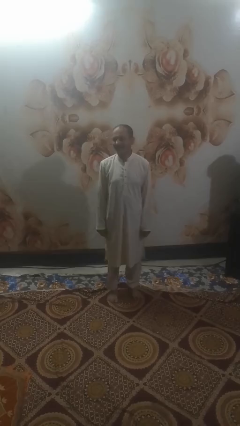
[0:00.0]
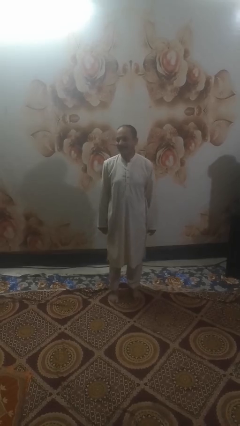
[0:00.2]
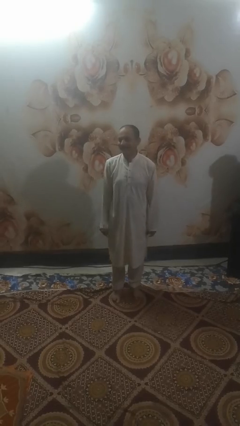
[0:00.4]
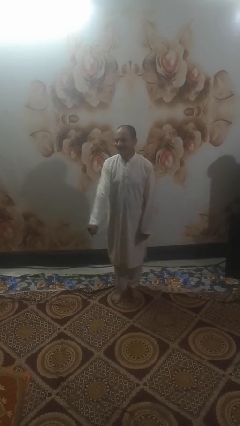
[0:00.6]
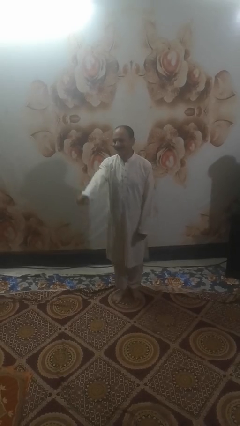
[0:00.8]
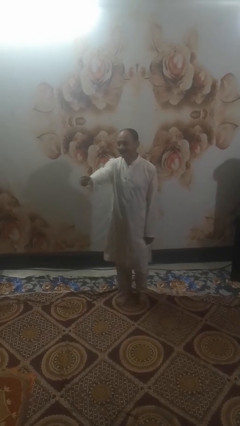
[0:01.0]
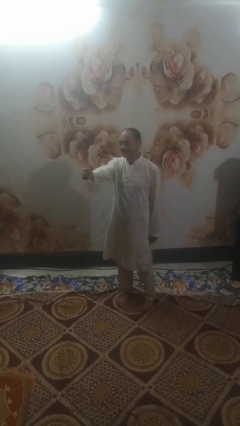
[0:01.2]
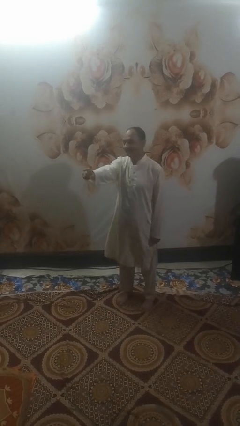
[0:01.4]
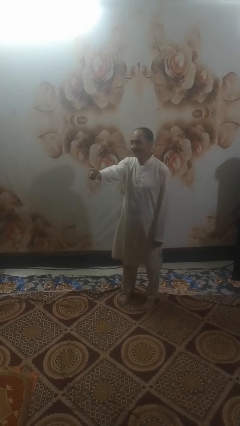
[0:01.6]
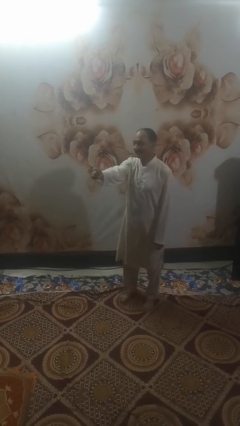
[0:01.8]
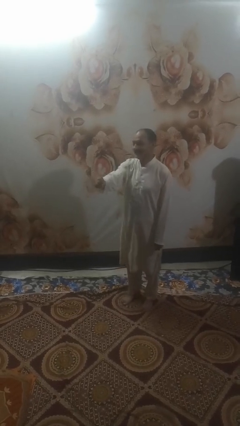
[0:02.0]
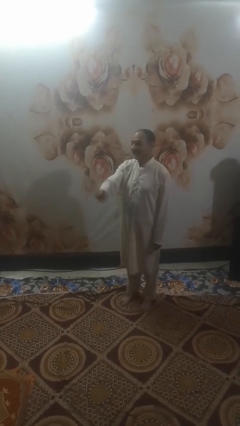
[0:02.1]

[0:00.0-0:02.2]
person points at person

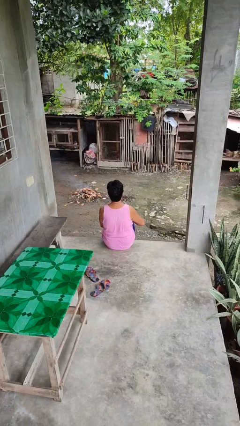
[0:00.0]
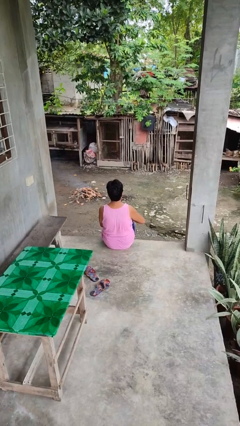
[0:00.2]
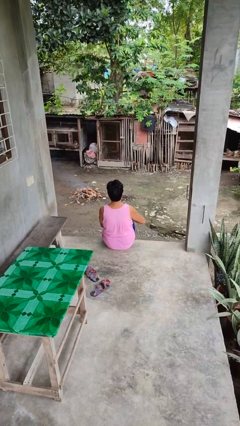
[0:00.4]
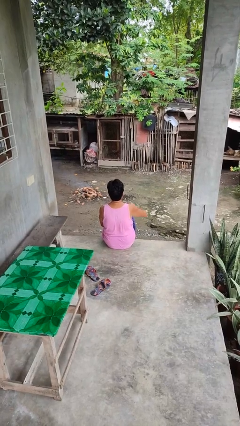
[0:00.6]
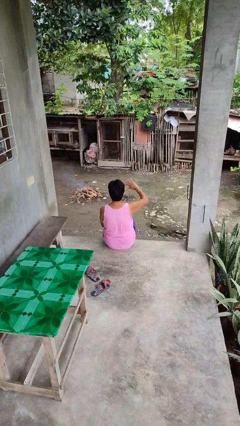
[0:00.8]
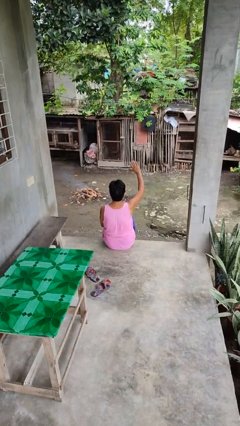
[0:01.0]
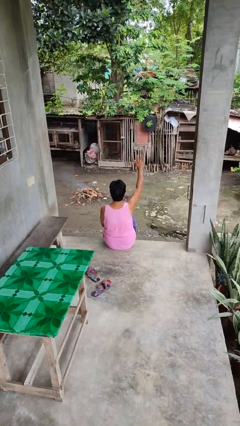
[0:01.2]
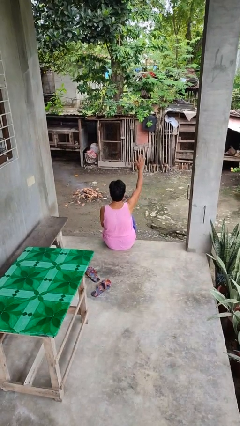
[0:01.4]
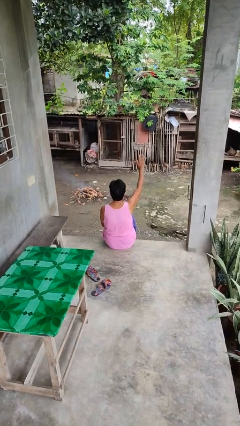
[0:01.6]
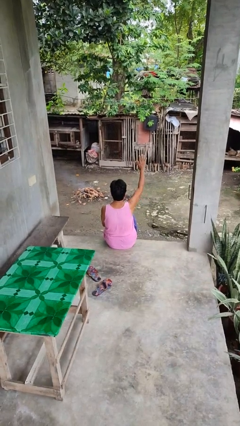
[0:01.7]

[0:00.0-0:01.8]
person gestures swipe up

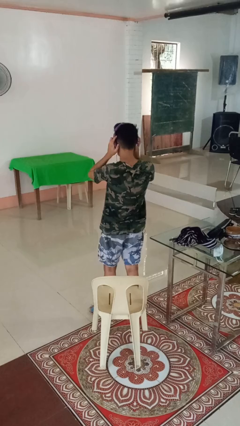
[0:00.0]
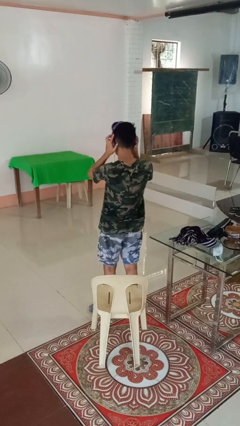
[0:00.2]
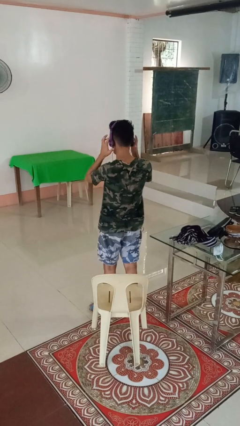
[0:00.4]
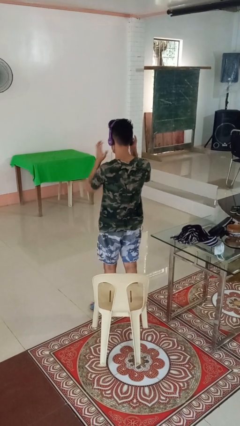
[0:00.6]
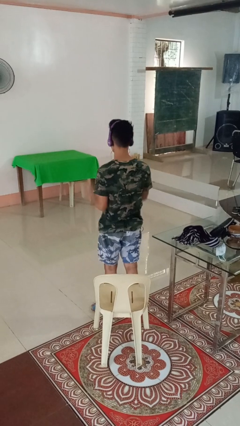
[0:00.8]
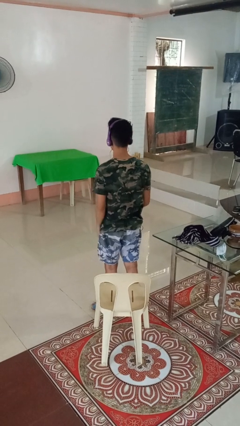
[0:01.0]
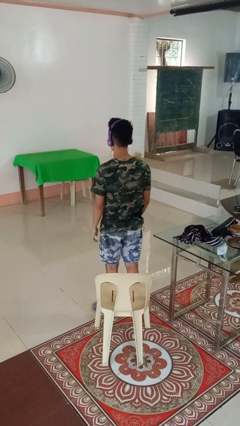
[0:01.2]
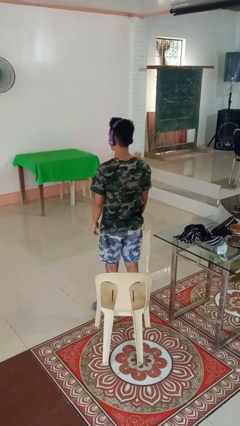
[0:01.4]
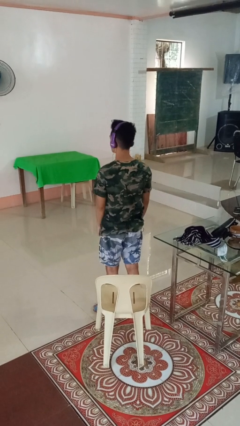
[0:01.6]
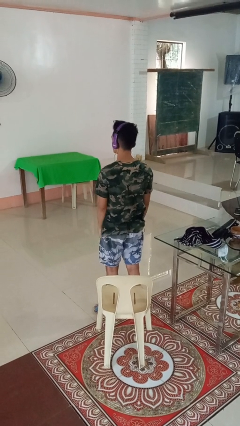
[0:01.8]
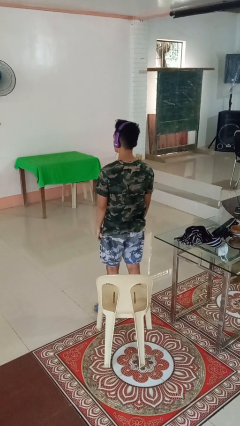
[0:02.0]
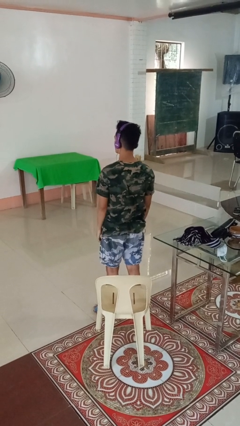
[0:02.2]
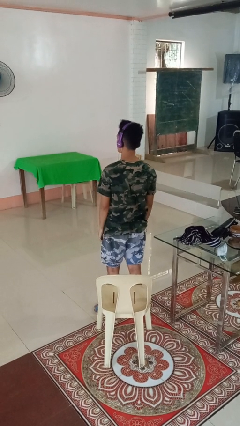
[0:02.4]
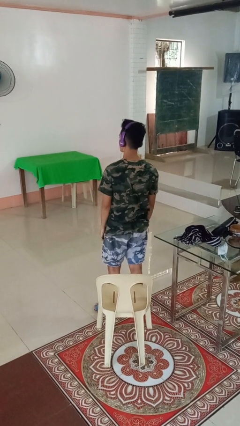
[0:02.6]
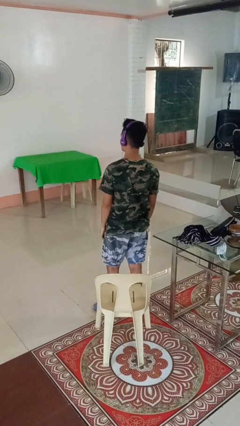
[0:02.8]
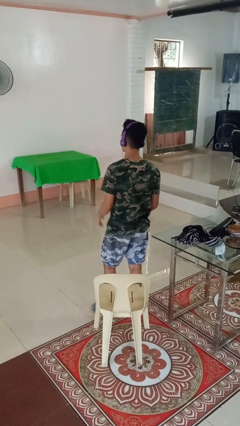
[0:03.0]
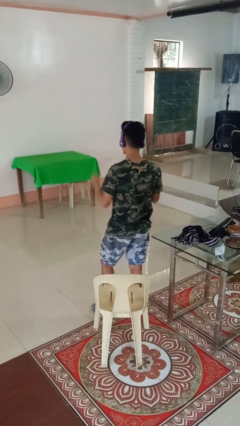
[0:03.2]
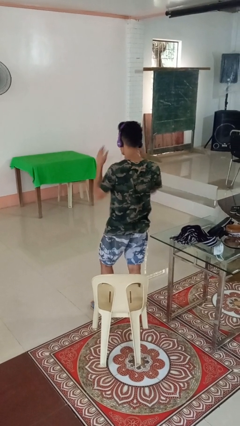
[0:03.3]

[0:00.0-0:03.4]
person puts on headphones

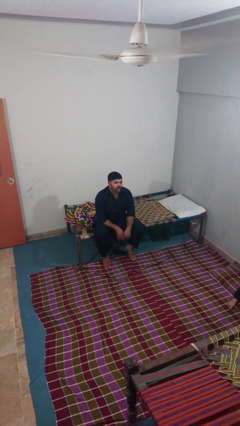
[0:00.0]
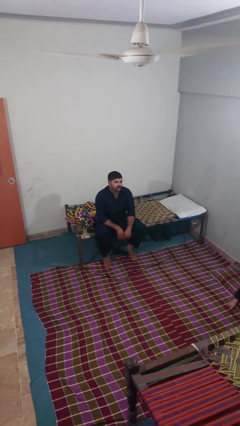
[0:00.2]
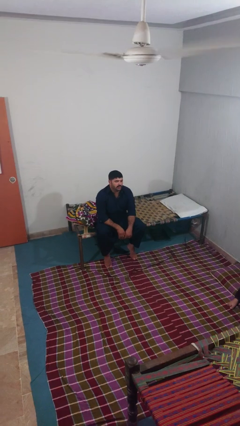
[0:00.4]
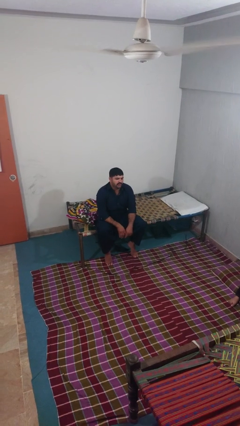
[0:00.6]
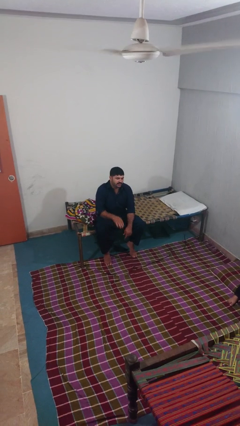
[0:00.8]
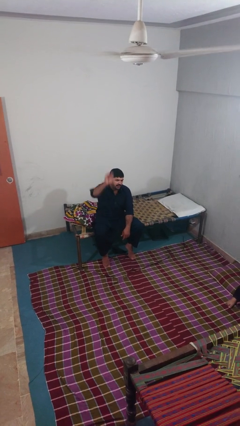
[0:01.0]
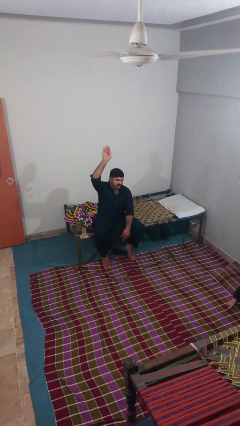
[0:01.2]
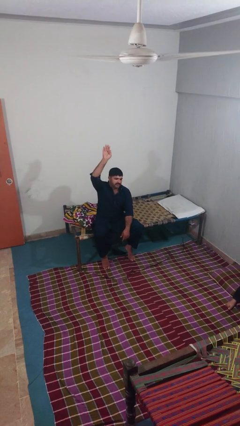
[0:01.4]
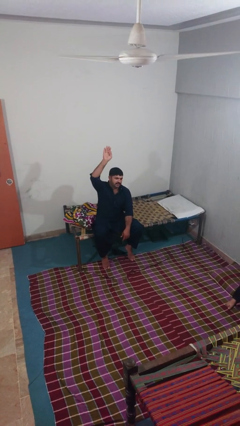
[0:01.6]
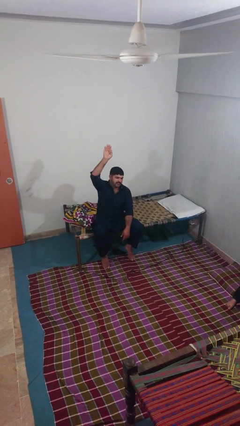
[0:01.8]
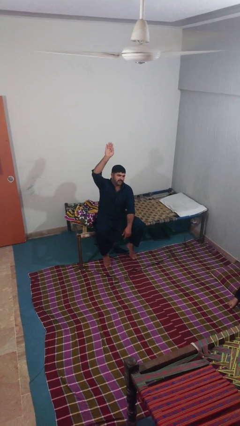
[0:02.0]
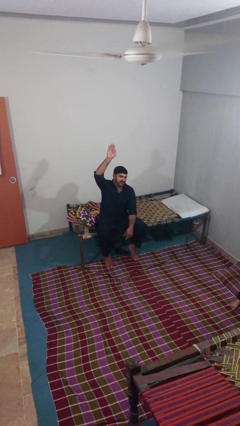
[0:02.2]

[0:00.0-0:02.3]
person gestures raise hand

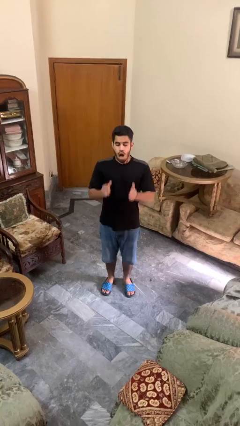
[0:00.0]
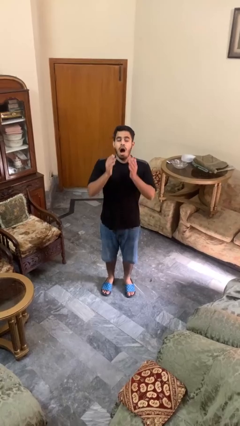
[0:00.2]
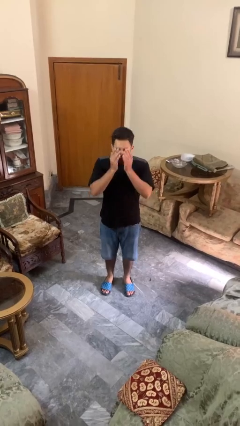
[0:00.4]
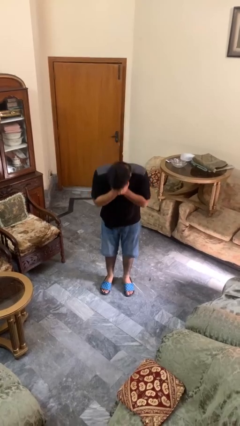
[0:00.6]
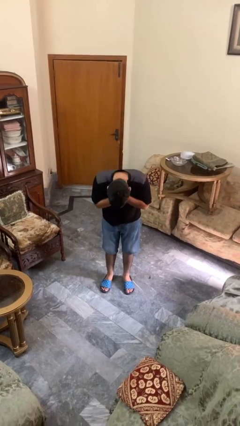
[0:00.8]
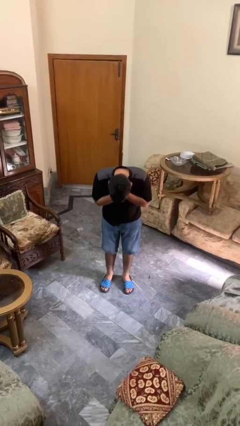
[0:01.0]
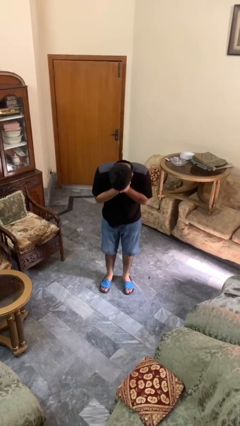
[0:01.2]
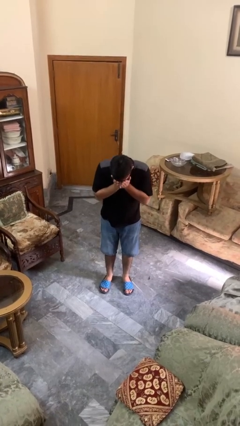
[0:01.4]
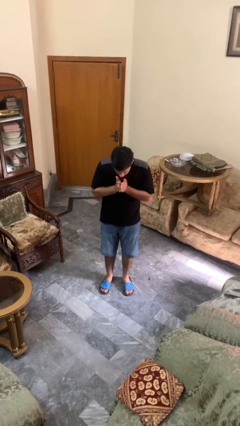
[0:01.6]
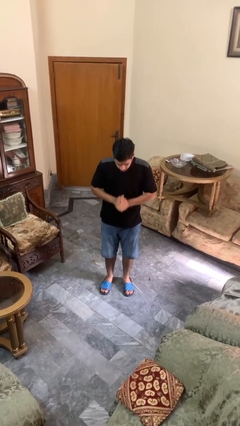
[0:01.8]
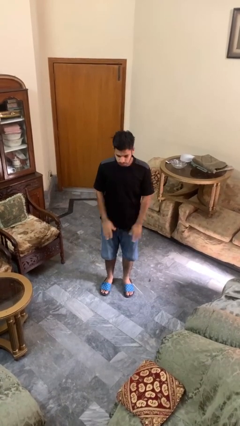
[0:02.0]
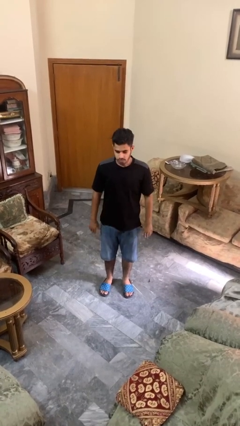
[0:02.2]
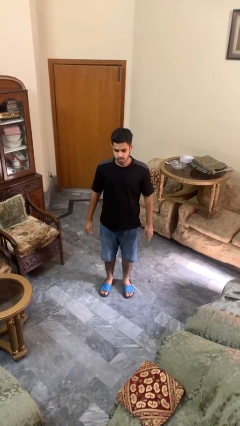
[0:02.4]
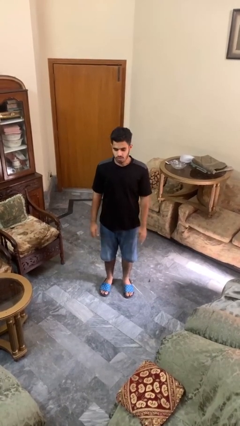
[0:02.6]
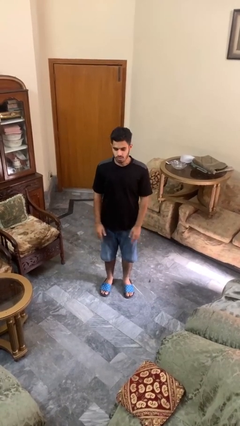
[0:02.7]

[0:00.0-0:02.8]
person sneezes into hand

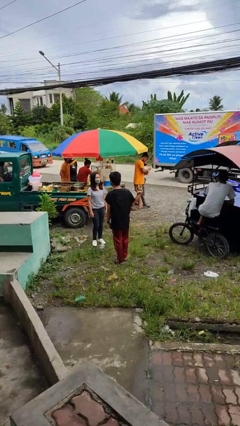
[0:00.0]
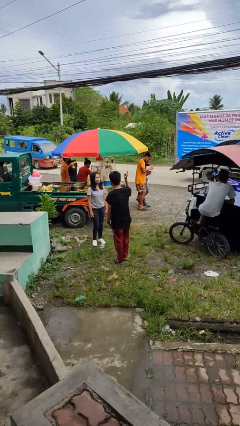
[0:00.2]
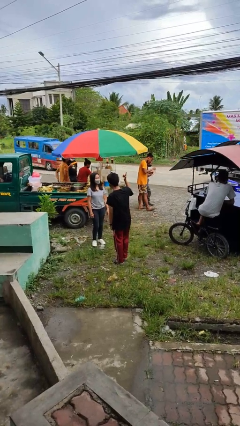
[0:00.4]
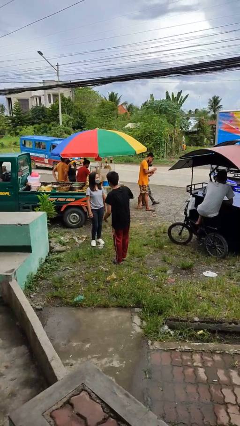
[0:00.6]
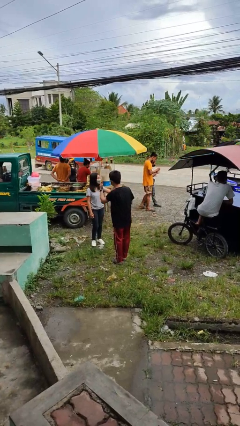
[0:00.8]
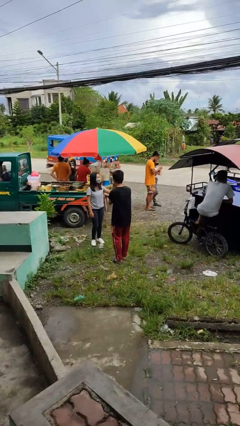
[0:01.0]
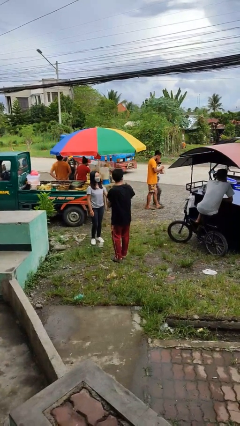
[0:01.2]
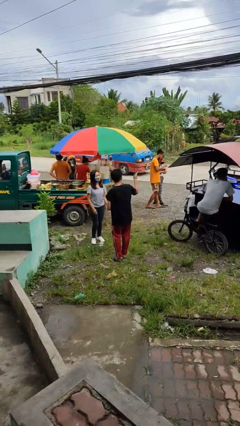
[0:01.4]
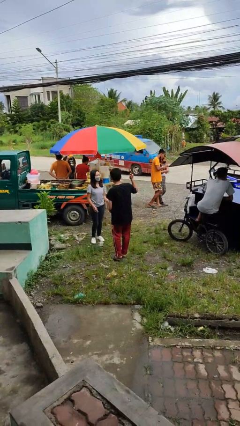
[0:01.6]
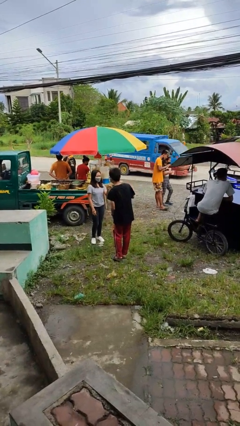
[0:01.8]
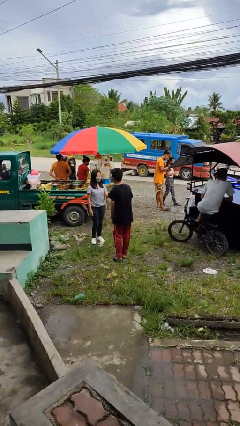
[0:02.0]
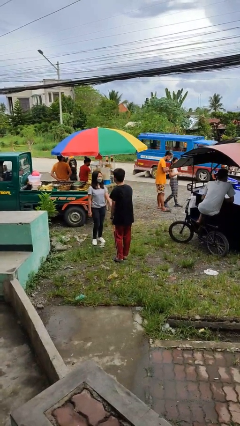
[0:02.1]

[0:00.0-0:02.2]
person talks to person

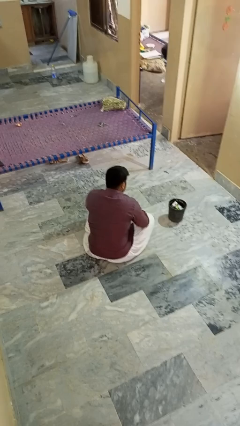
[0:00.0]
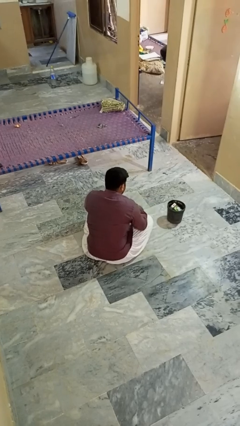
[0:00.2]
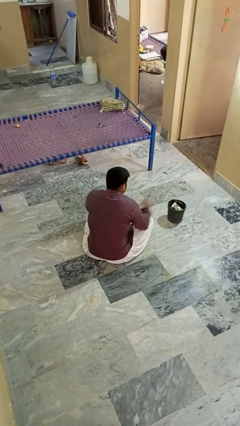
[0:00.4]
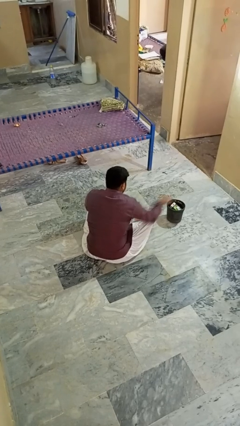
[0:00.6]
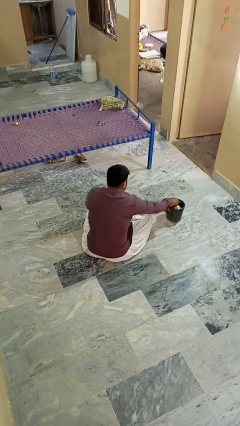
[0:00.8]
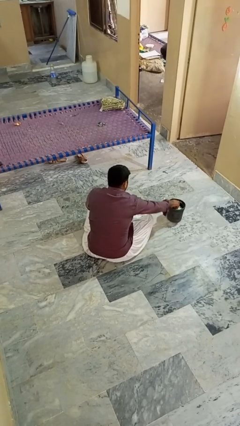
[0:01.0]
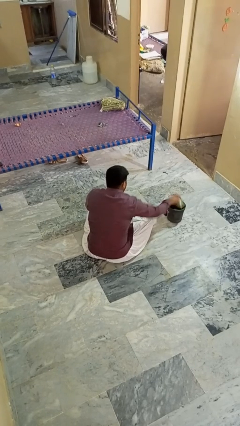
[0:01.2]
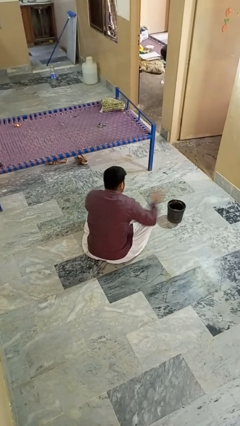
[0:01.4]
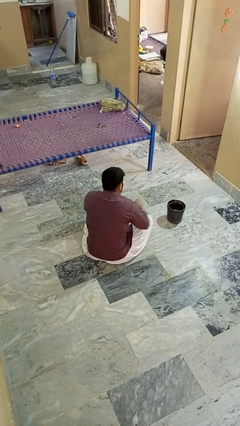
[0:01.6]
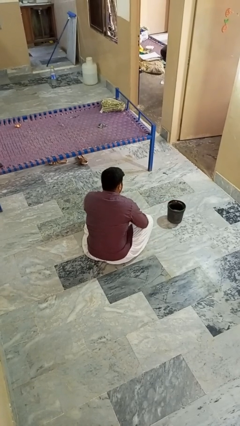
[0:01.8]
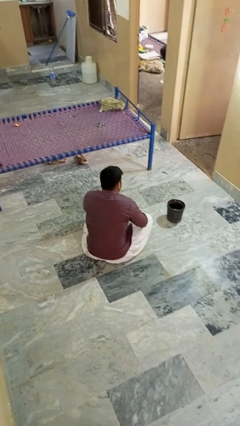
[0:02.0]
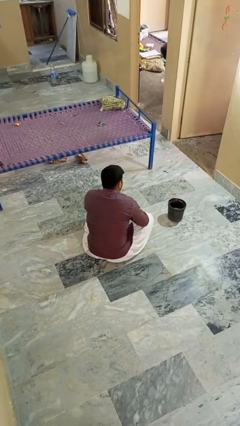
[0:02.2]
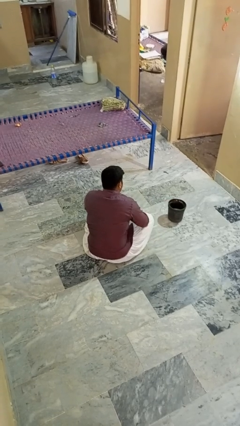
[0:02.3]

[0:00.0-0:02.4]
person takes object from basket

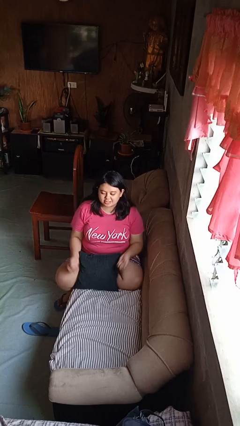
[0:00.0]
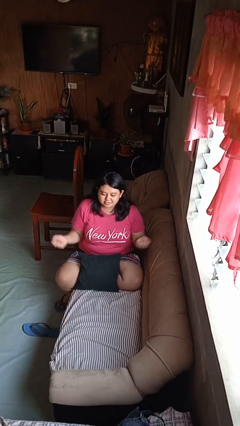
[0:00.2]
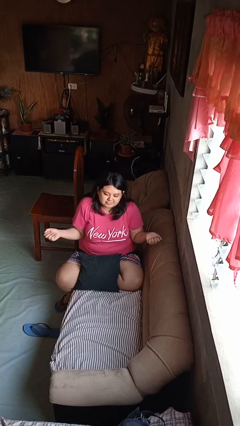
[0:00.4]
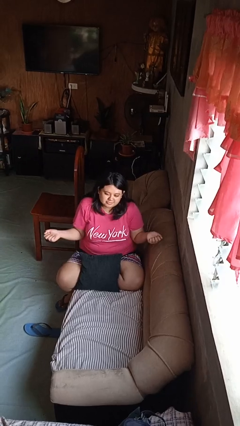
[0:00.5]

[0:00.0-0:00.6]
person shrugs
